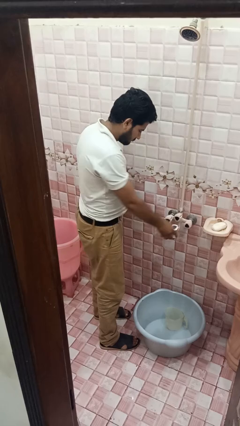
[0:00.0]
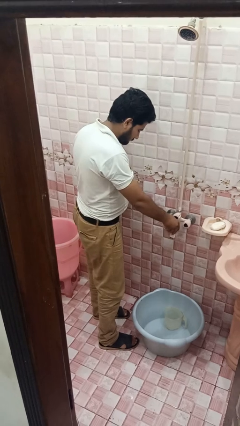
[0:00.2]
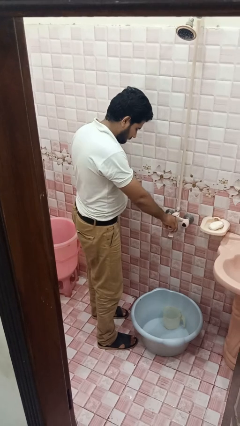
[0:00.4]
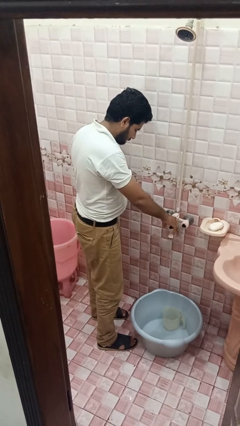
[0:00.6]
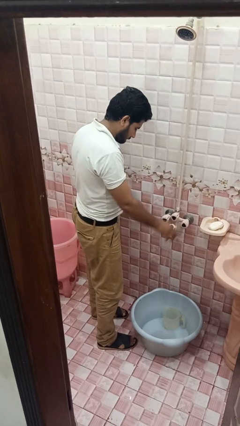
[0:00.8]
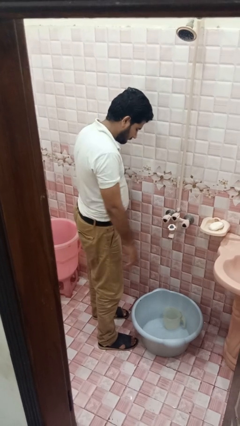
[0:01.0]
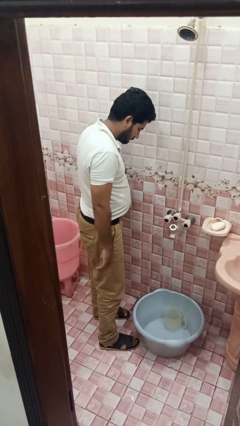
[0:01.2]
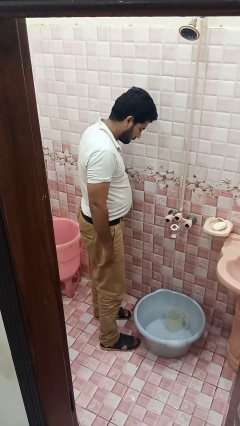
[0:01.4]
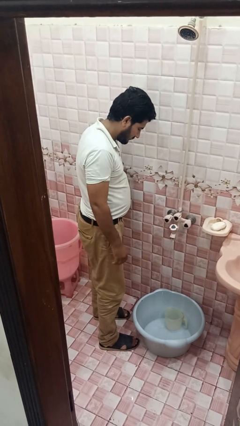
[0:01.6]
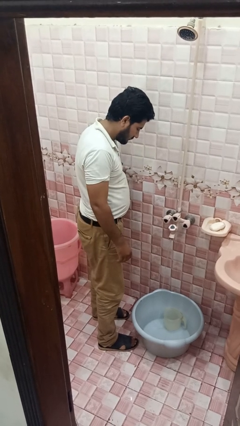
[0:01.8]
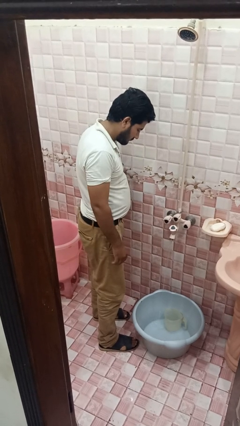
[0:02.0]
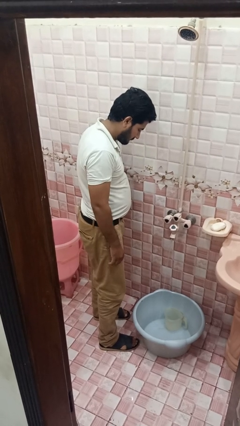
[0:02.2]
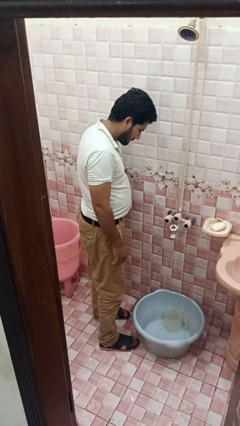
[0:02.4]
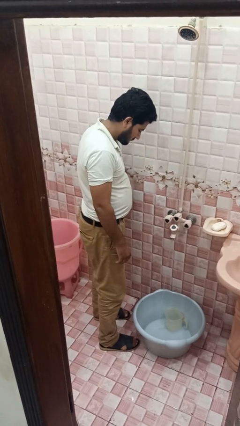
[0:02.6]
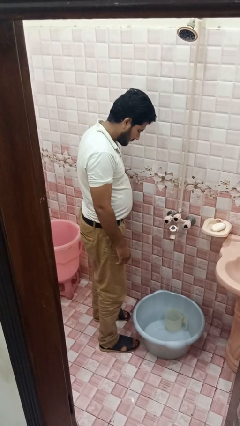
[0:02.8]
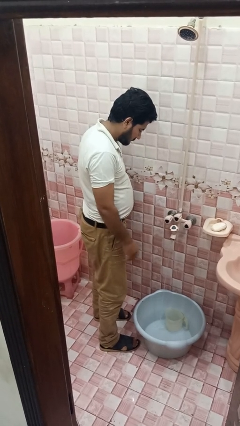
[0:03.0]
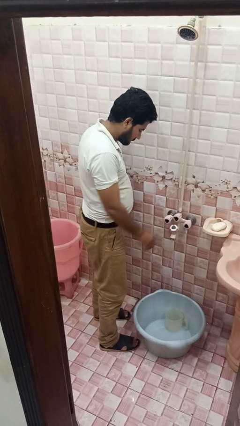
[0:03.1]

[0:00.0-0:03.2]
person turns on faucet

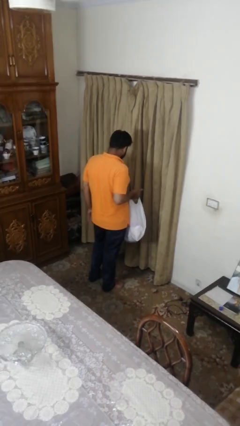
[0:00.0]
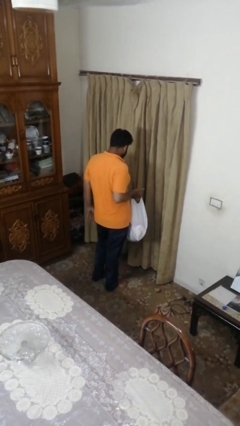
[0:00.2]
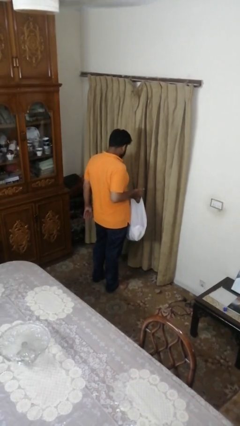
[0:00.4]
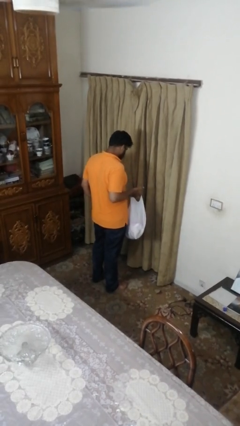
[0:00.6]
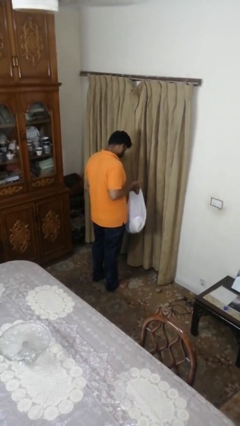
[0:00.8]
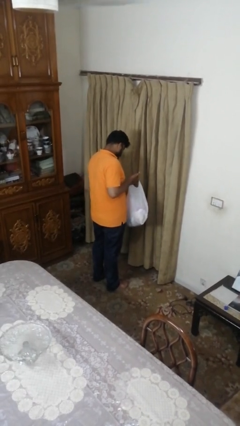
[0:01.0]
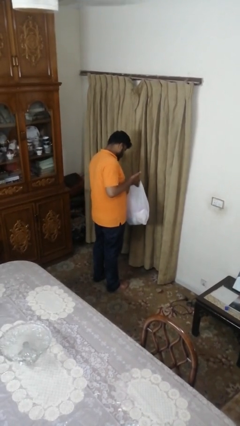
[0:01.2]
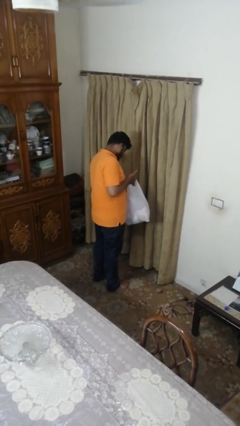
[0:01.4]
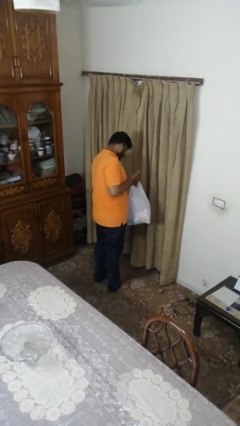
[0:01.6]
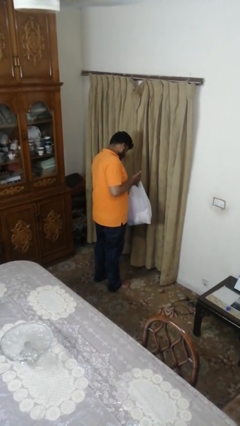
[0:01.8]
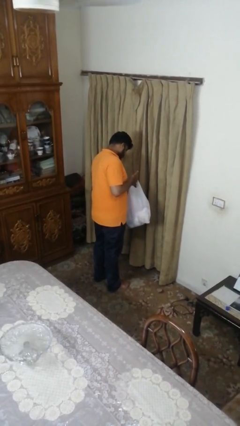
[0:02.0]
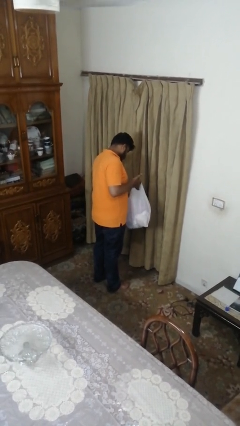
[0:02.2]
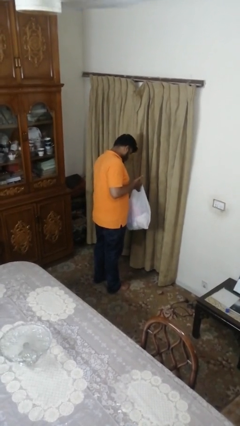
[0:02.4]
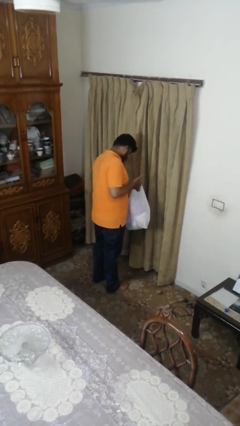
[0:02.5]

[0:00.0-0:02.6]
person searches in bag

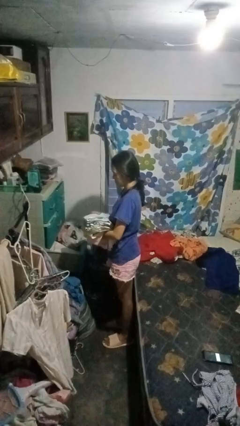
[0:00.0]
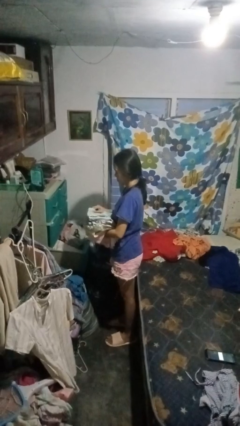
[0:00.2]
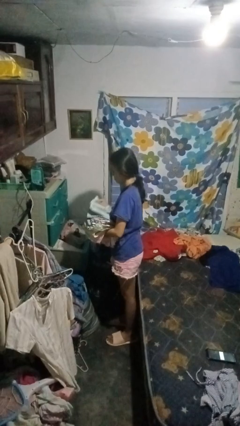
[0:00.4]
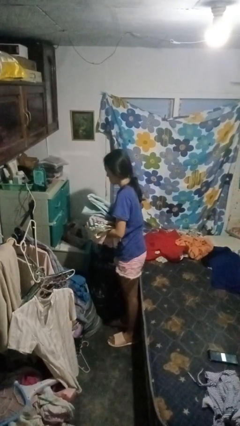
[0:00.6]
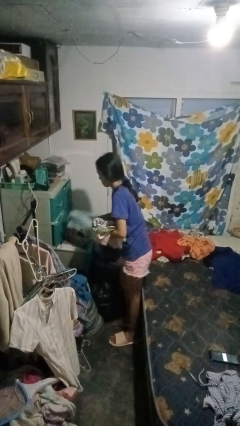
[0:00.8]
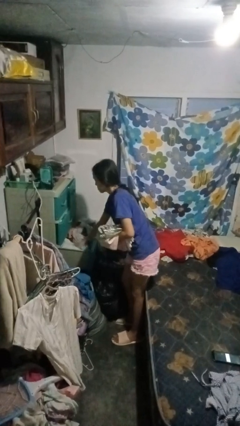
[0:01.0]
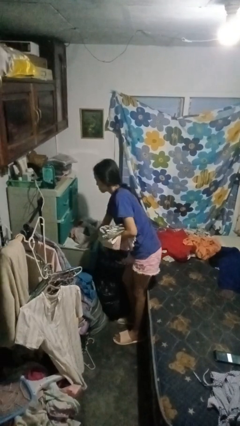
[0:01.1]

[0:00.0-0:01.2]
person puts clothes into dresser

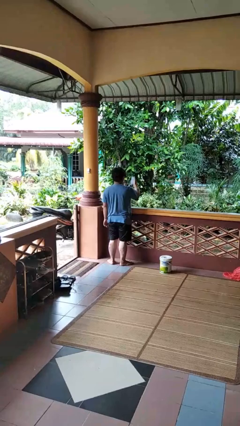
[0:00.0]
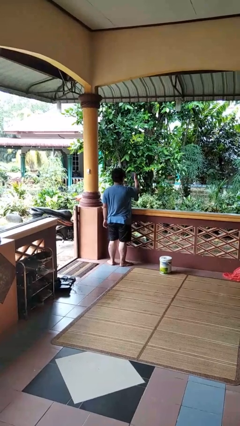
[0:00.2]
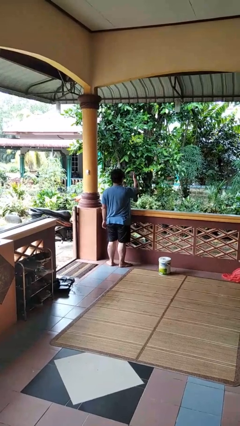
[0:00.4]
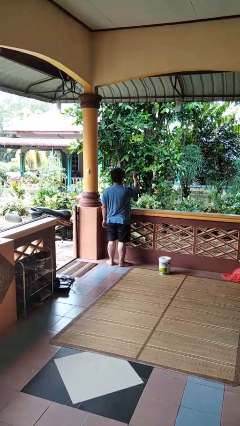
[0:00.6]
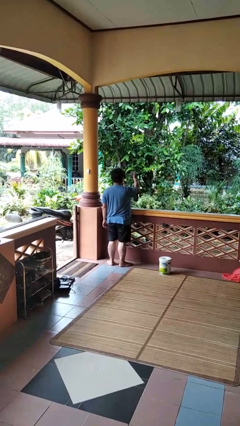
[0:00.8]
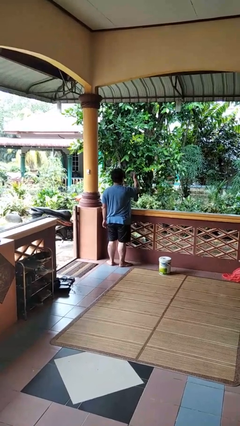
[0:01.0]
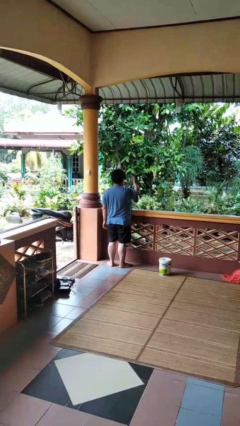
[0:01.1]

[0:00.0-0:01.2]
person takes selfie

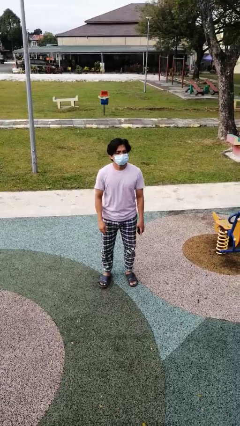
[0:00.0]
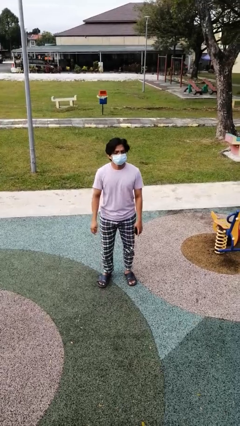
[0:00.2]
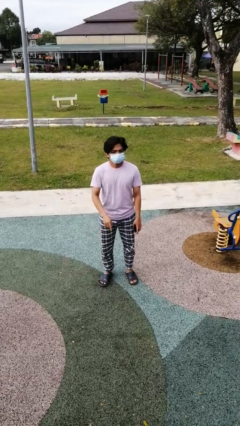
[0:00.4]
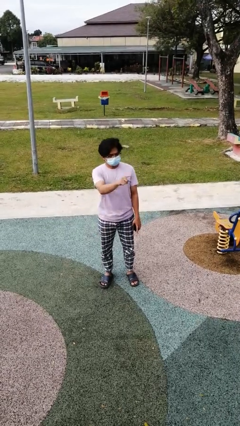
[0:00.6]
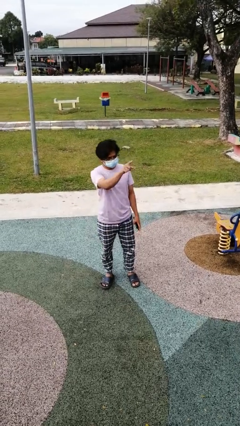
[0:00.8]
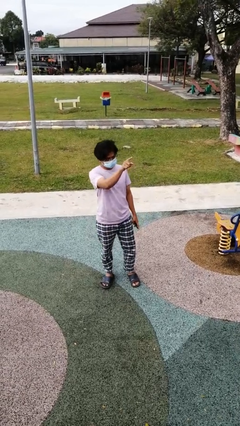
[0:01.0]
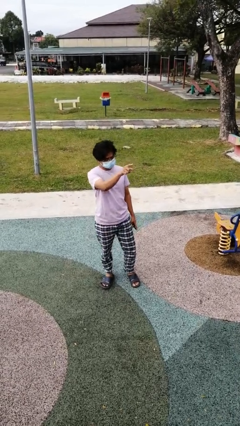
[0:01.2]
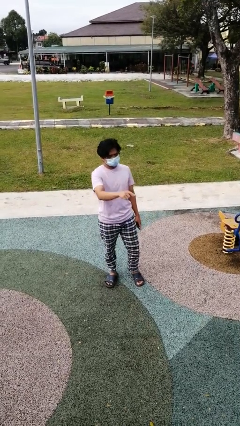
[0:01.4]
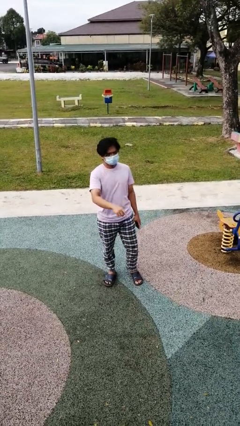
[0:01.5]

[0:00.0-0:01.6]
person points at person

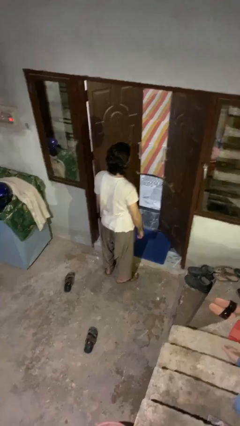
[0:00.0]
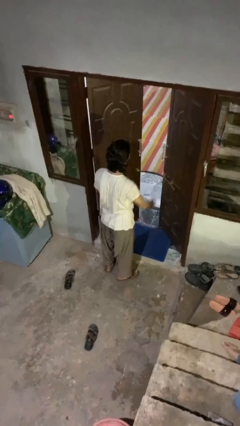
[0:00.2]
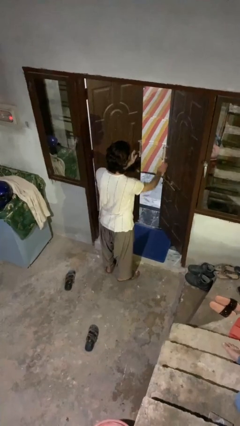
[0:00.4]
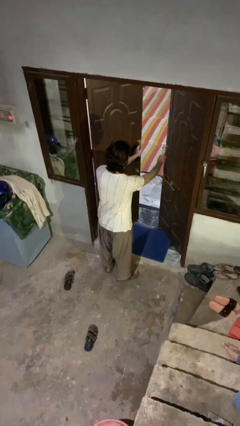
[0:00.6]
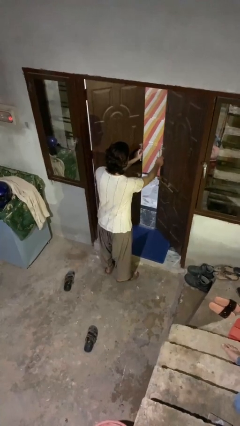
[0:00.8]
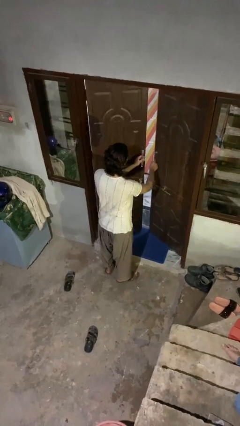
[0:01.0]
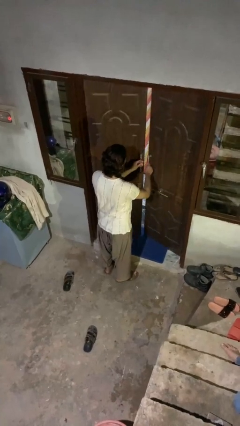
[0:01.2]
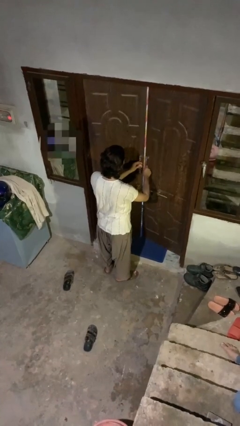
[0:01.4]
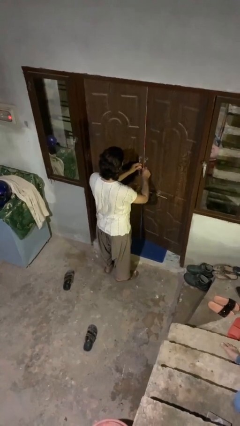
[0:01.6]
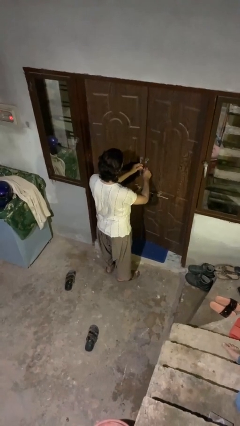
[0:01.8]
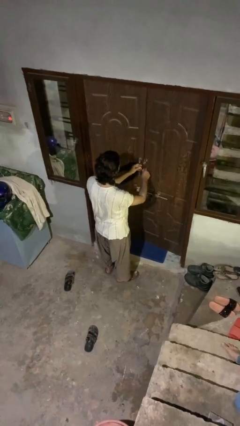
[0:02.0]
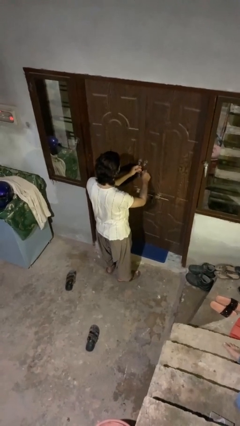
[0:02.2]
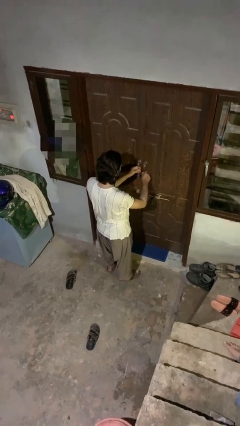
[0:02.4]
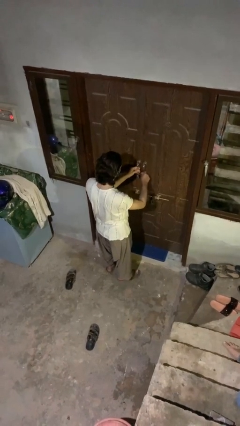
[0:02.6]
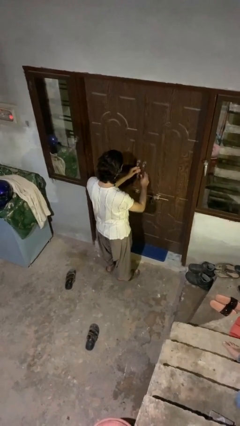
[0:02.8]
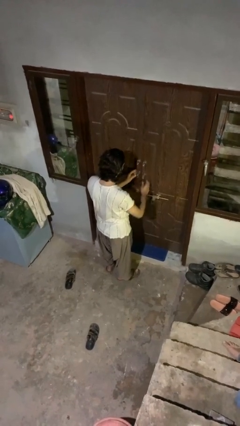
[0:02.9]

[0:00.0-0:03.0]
person closes facility door

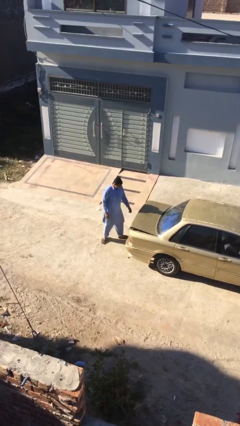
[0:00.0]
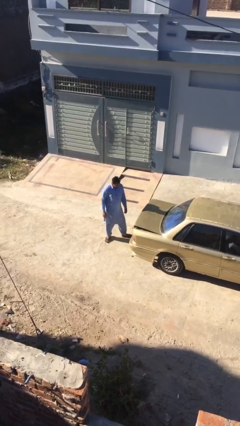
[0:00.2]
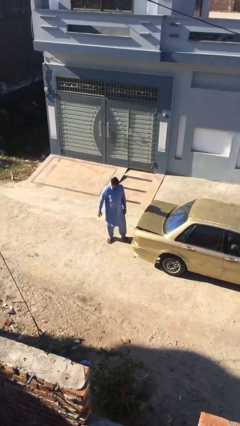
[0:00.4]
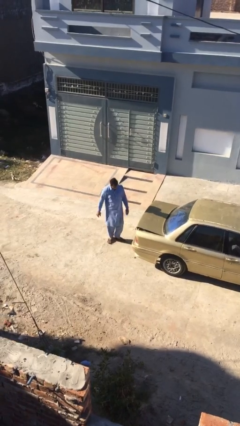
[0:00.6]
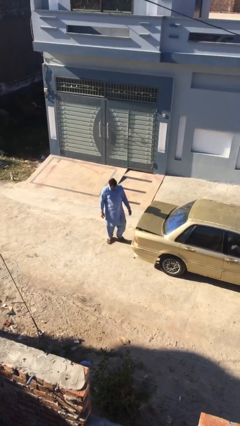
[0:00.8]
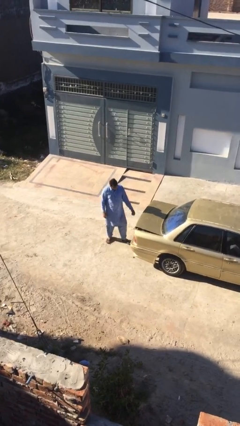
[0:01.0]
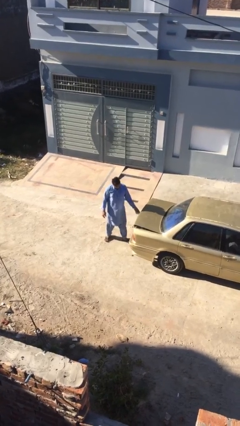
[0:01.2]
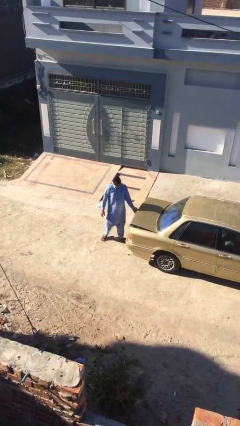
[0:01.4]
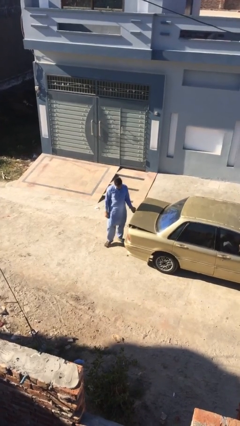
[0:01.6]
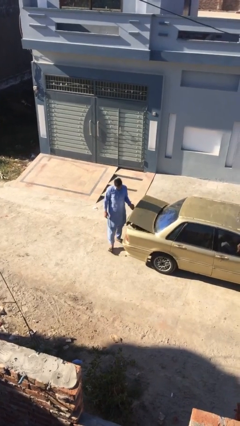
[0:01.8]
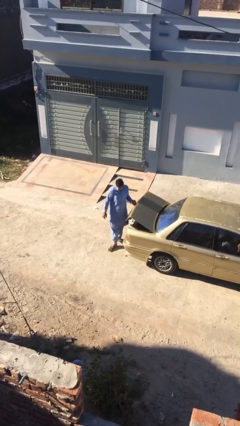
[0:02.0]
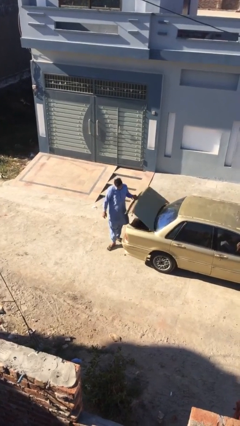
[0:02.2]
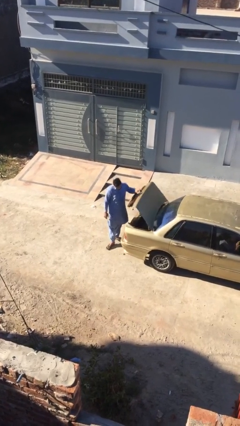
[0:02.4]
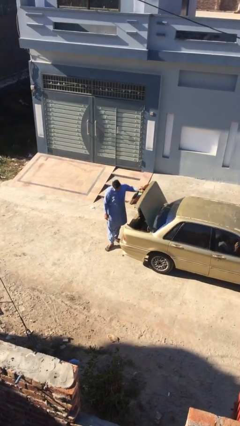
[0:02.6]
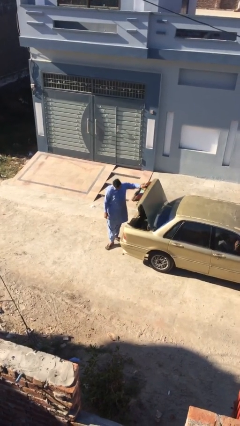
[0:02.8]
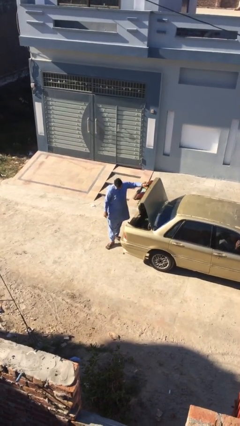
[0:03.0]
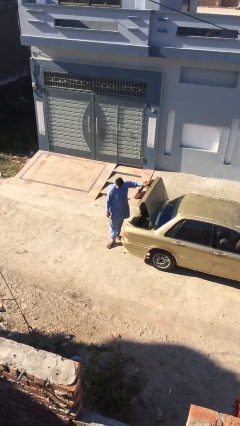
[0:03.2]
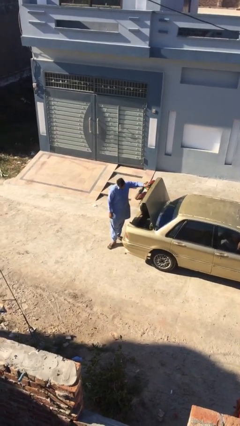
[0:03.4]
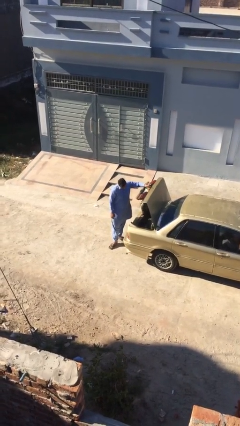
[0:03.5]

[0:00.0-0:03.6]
person opens car trunk

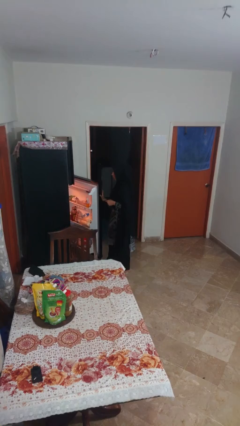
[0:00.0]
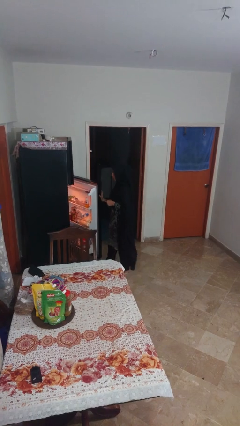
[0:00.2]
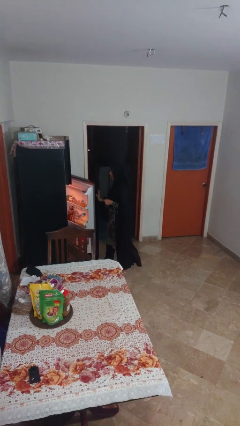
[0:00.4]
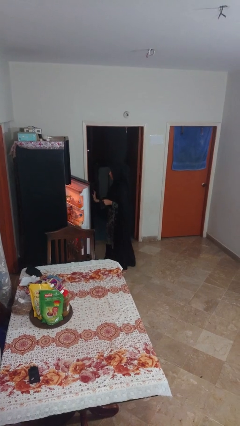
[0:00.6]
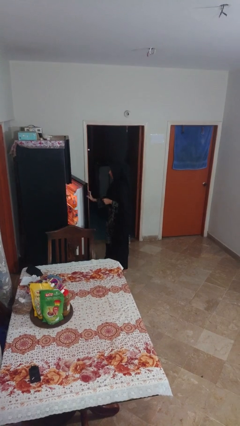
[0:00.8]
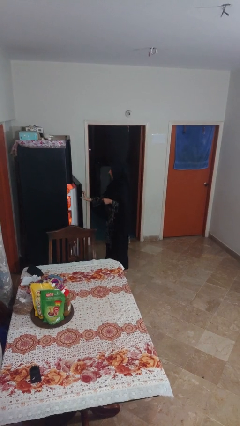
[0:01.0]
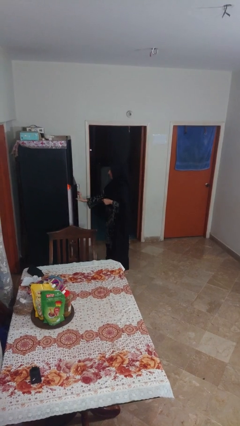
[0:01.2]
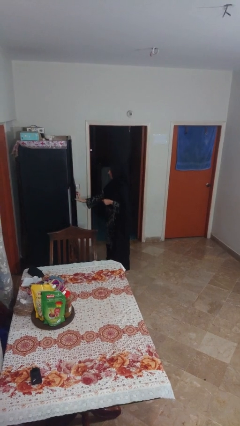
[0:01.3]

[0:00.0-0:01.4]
person closes refrigerator
